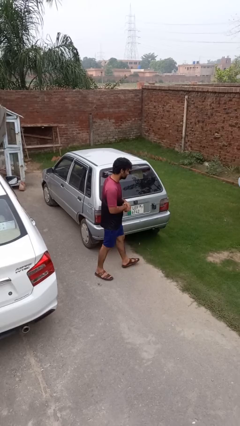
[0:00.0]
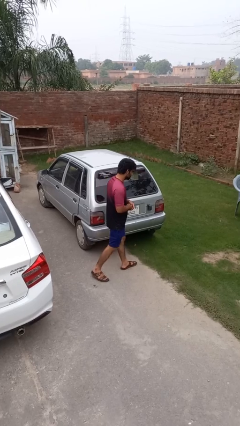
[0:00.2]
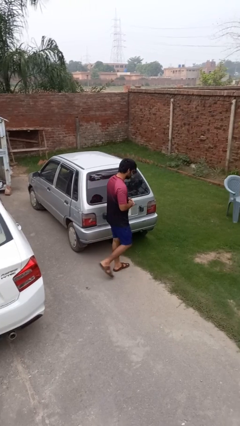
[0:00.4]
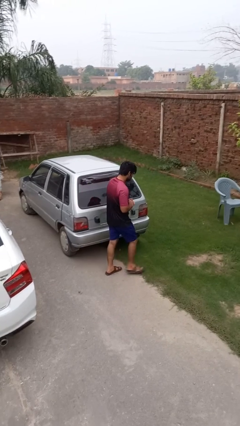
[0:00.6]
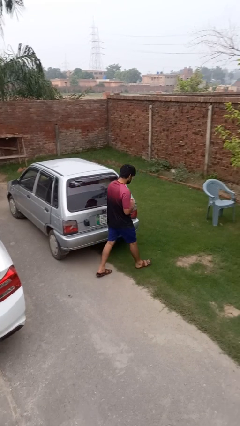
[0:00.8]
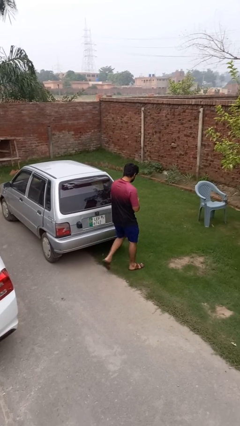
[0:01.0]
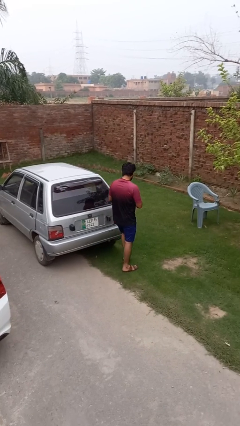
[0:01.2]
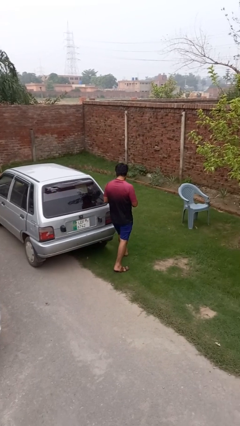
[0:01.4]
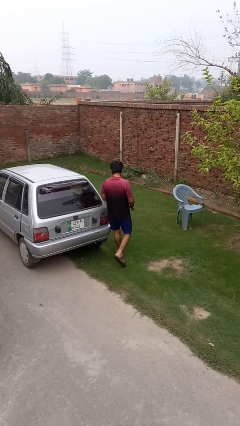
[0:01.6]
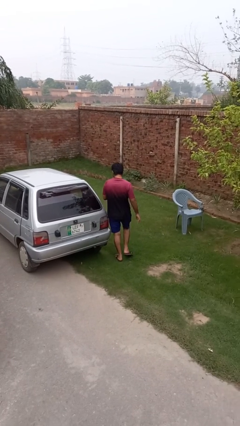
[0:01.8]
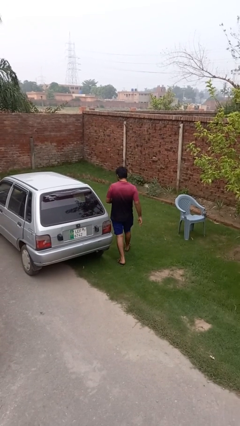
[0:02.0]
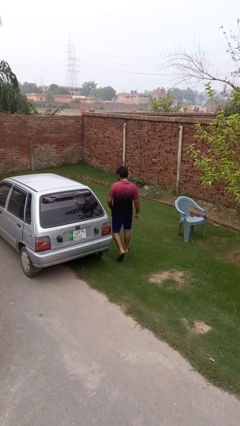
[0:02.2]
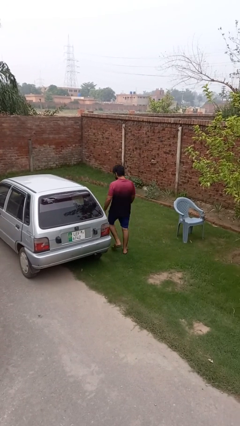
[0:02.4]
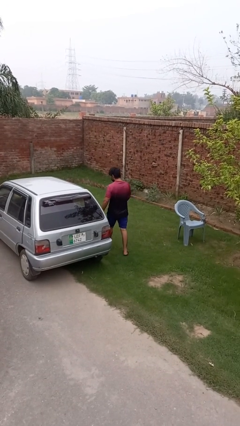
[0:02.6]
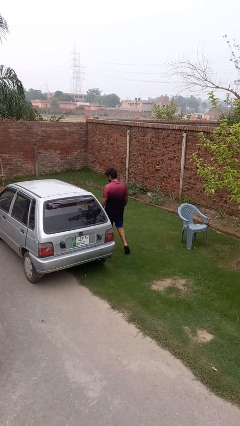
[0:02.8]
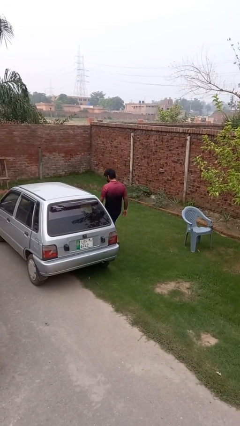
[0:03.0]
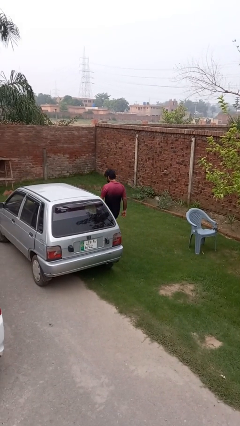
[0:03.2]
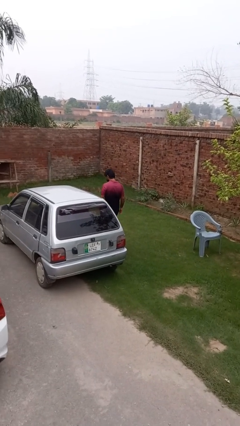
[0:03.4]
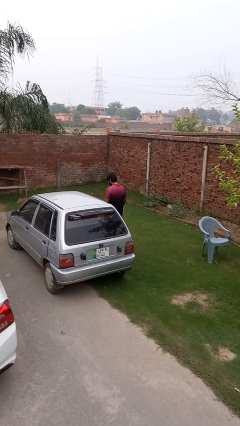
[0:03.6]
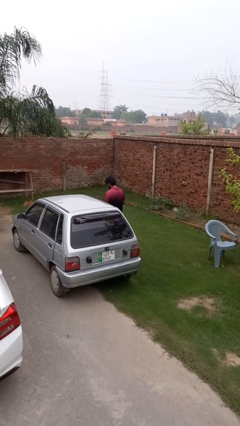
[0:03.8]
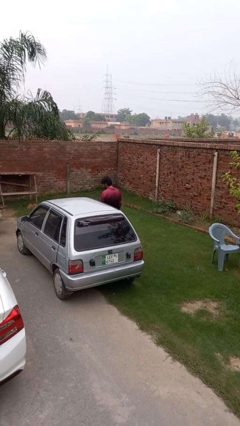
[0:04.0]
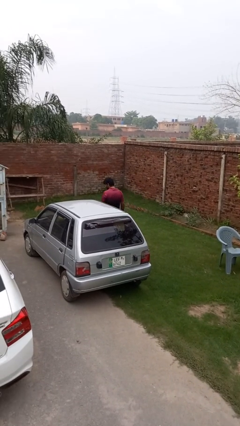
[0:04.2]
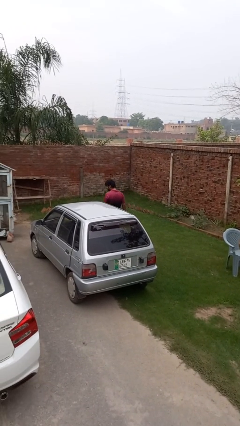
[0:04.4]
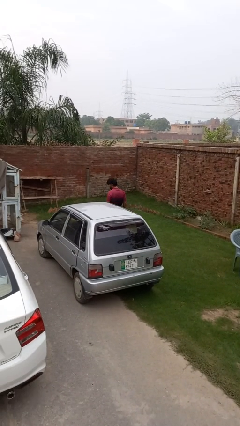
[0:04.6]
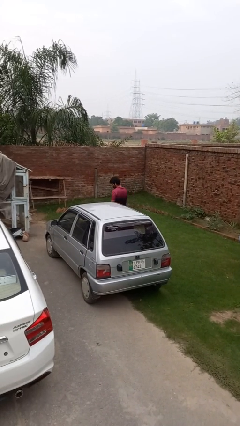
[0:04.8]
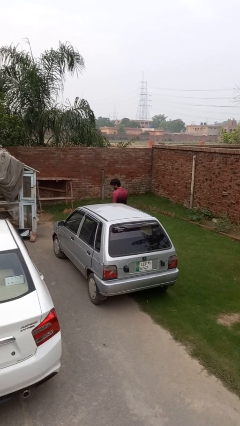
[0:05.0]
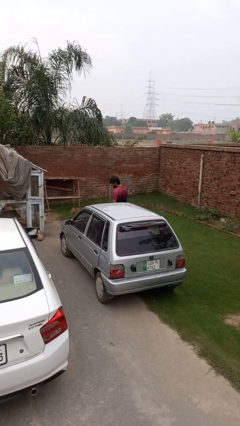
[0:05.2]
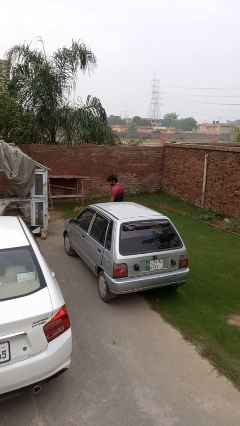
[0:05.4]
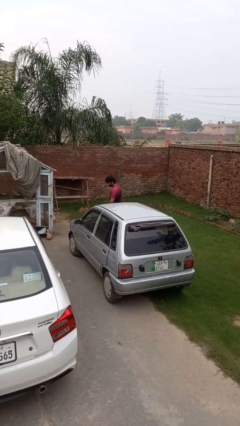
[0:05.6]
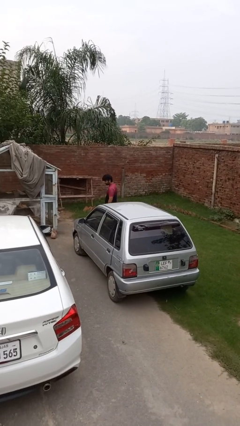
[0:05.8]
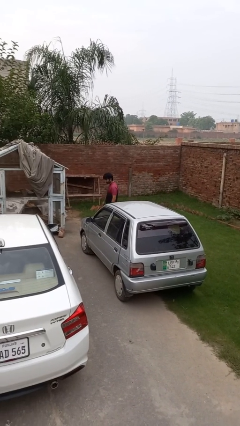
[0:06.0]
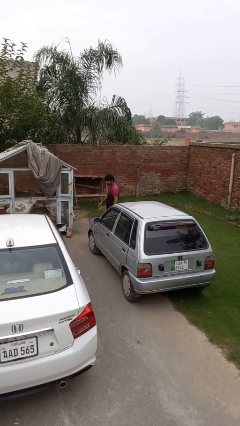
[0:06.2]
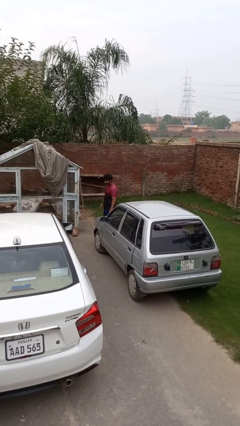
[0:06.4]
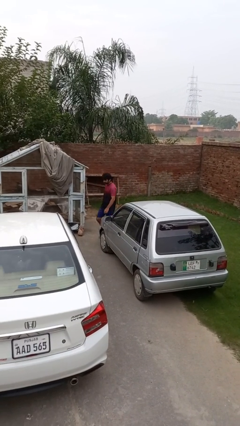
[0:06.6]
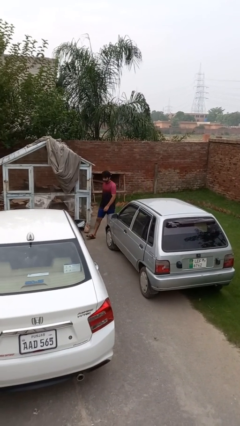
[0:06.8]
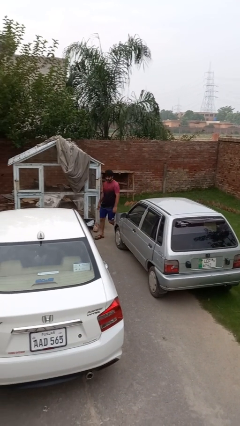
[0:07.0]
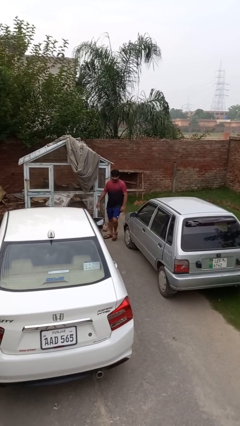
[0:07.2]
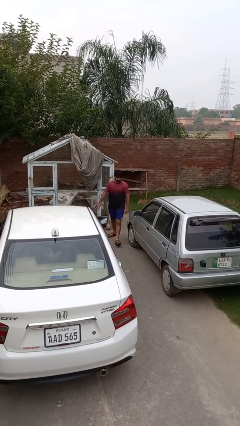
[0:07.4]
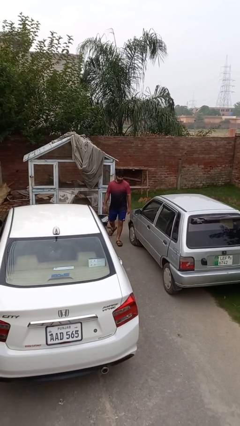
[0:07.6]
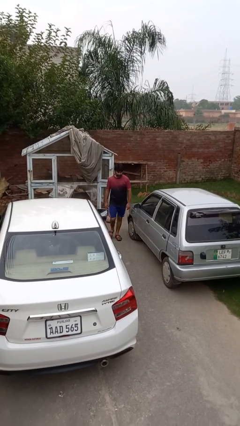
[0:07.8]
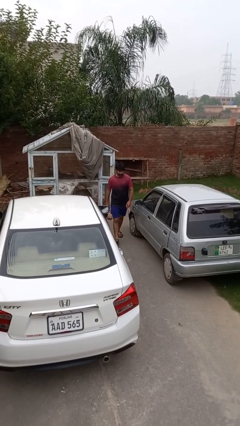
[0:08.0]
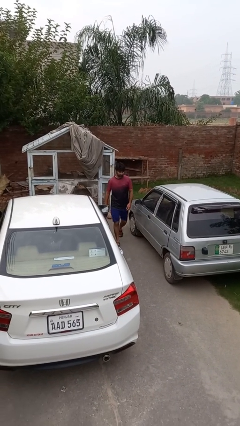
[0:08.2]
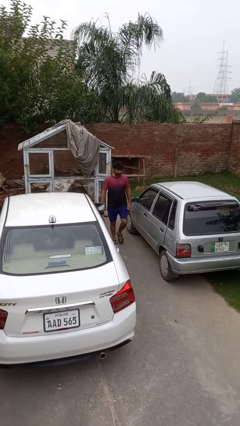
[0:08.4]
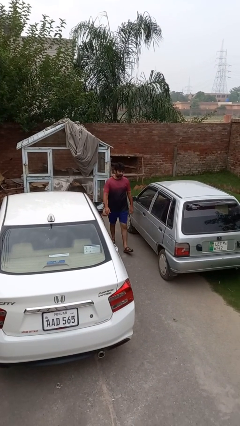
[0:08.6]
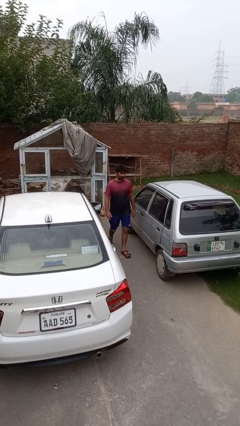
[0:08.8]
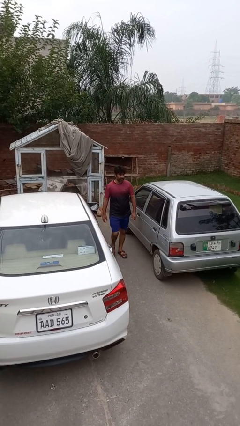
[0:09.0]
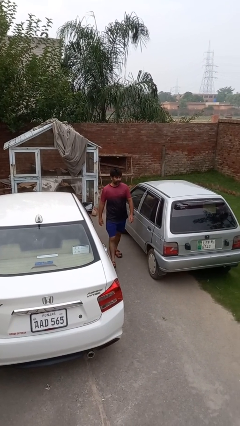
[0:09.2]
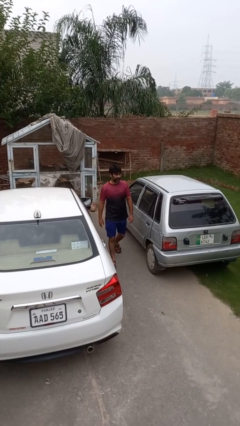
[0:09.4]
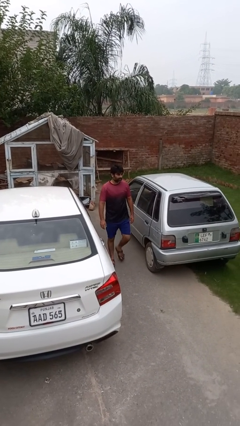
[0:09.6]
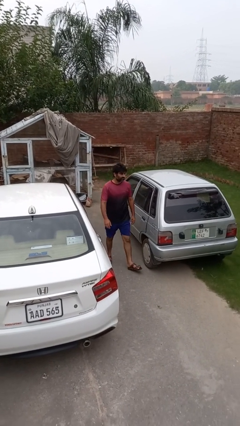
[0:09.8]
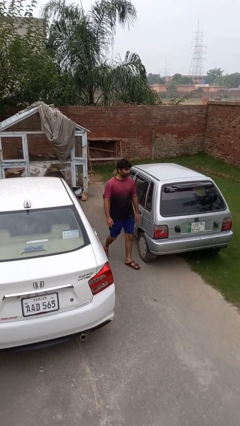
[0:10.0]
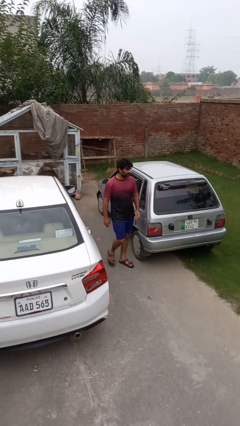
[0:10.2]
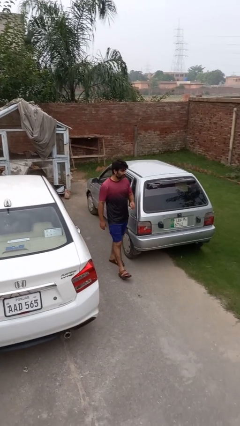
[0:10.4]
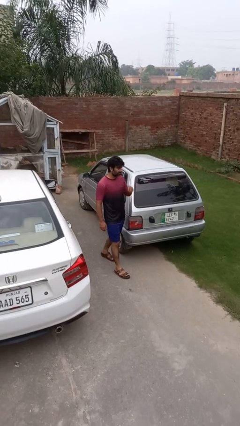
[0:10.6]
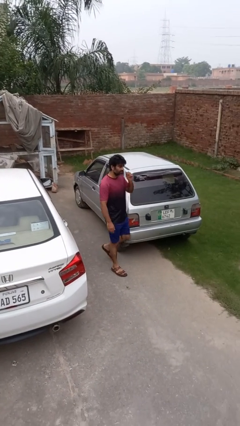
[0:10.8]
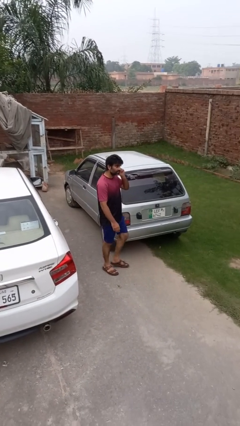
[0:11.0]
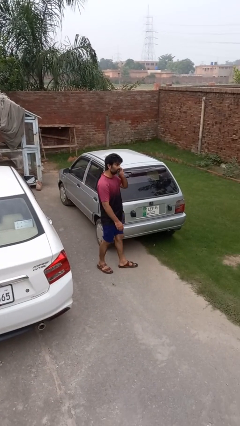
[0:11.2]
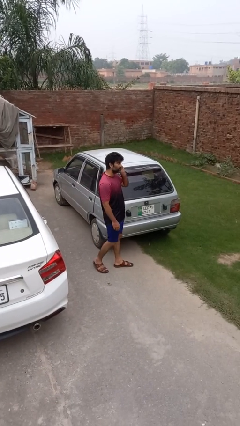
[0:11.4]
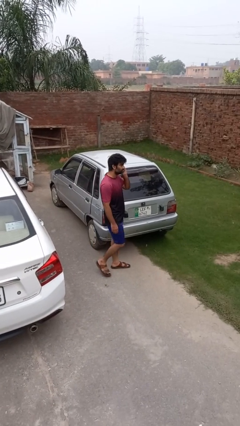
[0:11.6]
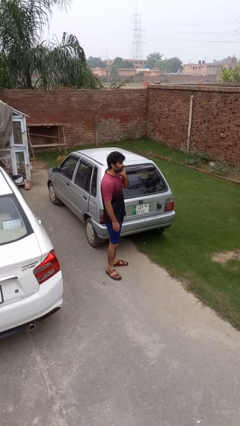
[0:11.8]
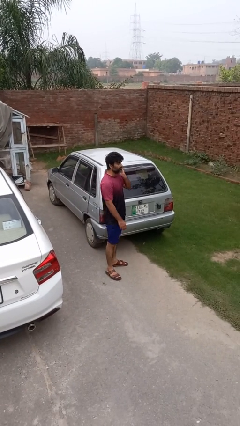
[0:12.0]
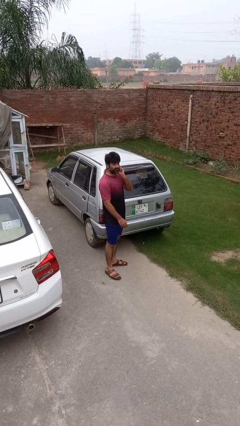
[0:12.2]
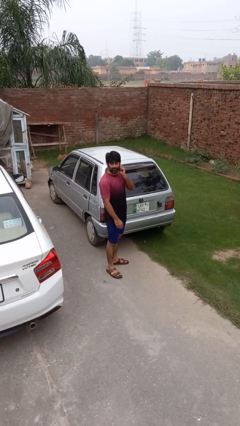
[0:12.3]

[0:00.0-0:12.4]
person walks around car

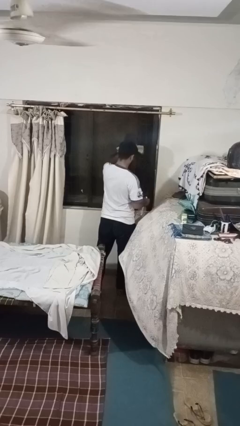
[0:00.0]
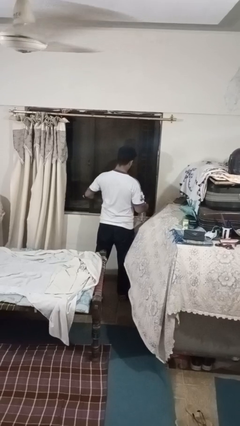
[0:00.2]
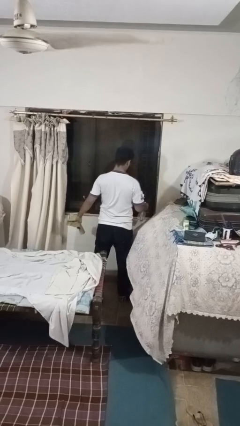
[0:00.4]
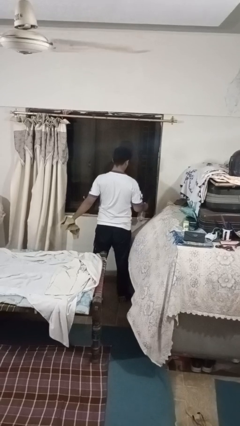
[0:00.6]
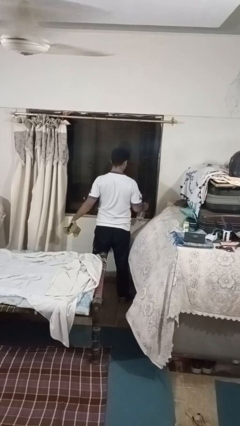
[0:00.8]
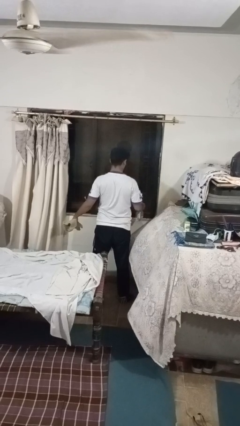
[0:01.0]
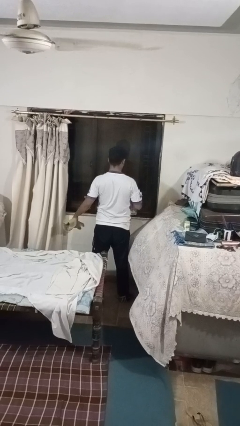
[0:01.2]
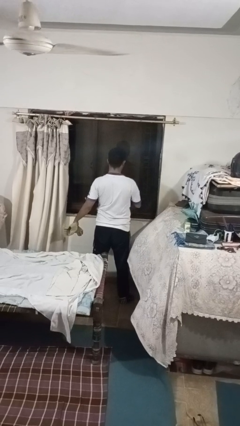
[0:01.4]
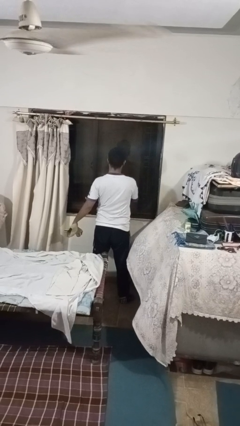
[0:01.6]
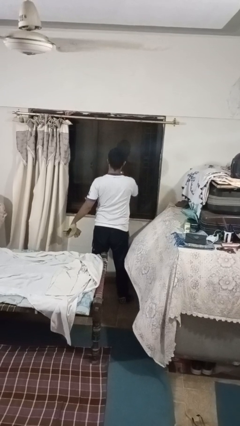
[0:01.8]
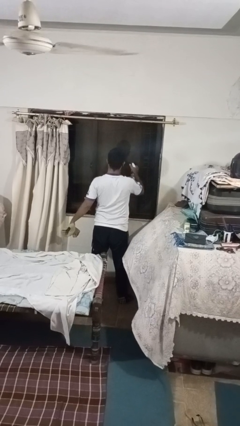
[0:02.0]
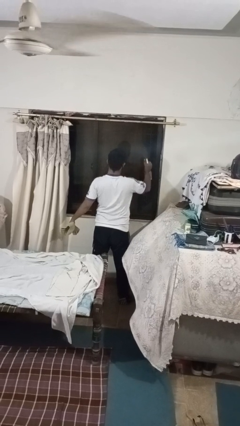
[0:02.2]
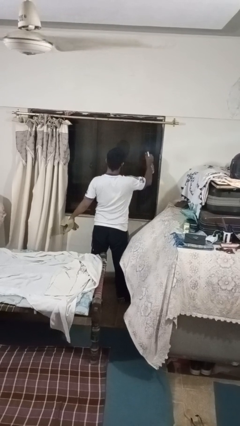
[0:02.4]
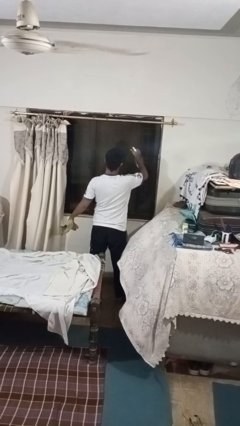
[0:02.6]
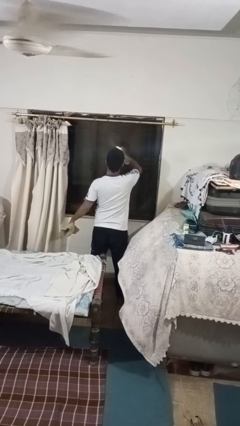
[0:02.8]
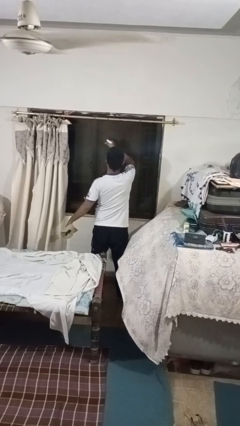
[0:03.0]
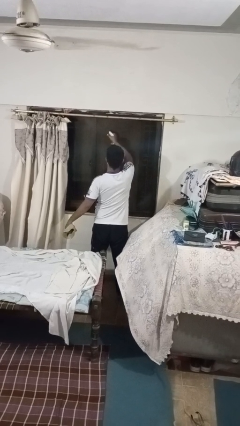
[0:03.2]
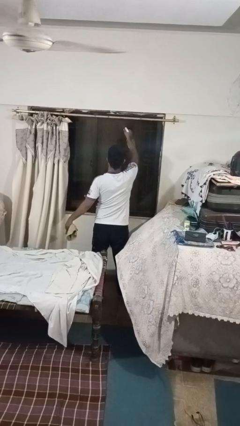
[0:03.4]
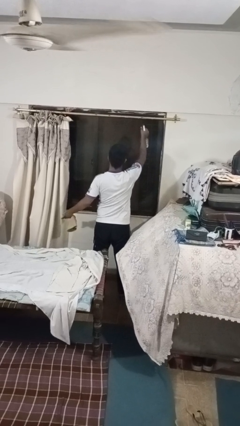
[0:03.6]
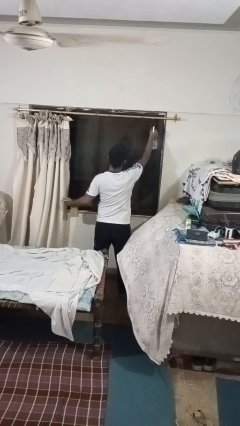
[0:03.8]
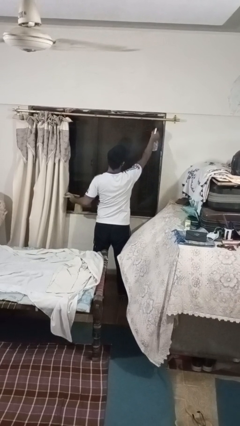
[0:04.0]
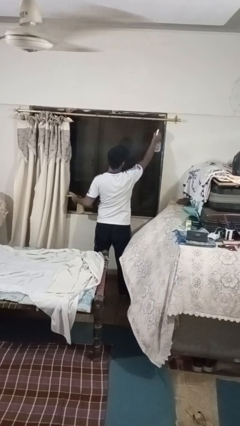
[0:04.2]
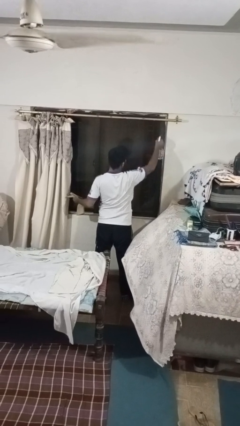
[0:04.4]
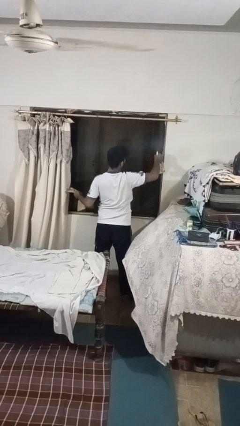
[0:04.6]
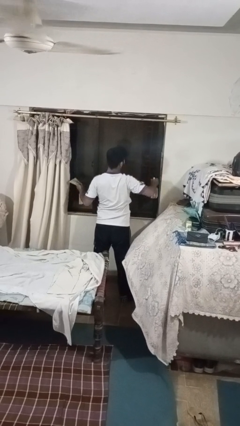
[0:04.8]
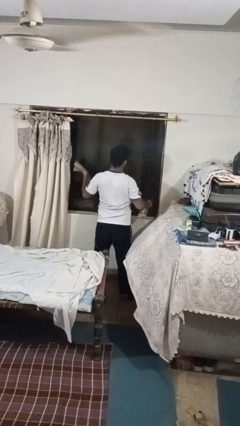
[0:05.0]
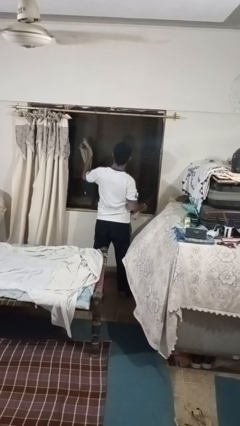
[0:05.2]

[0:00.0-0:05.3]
person sprays from bottle

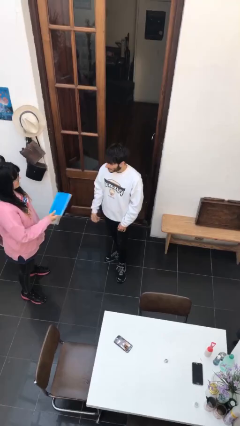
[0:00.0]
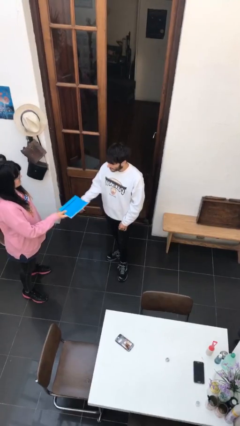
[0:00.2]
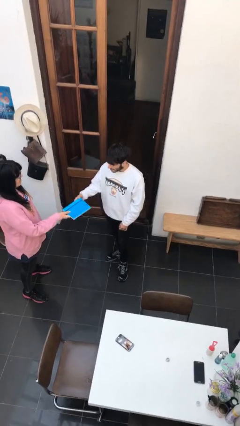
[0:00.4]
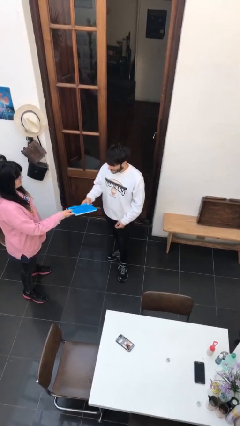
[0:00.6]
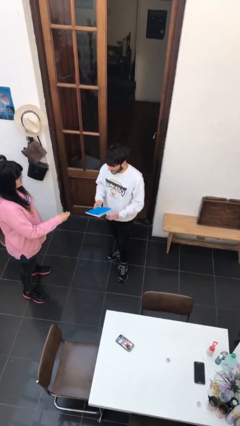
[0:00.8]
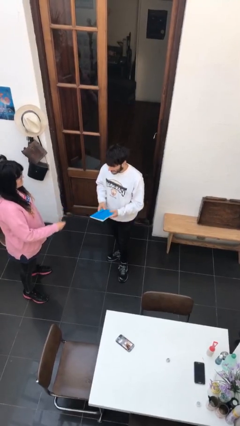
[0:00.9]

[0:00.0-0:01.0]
person transfers object to person
